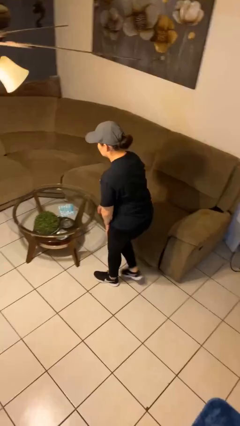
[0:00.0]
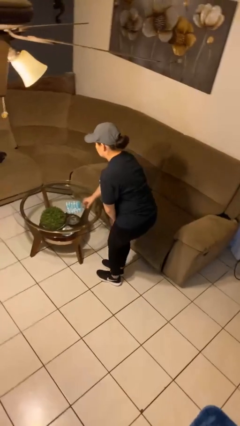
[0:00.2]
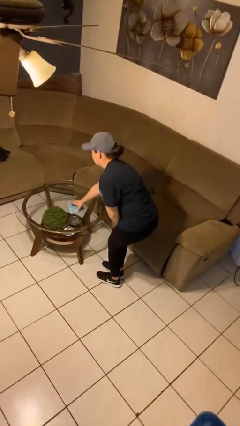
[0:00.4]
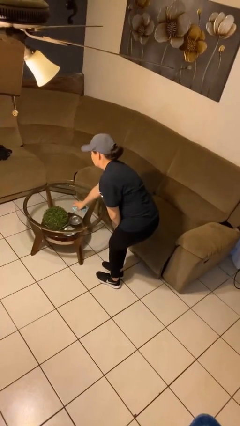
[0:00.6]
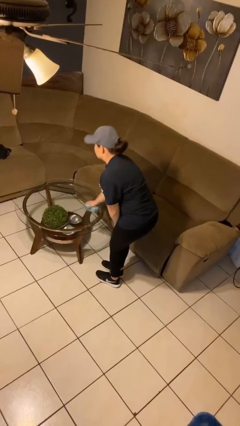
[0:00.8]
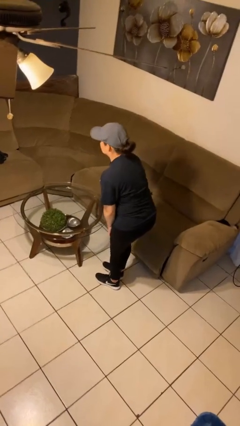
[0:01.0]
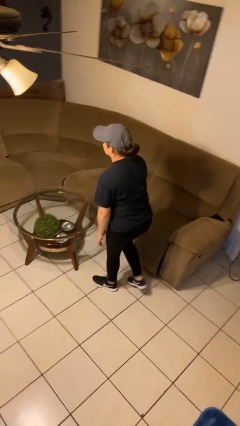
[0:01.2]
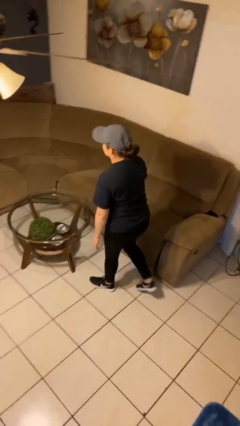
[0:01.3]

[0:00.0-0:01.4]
person picks up object from table

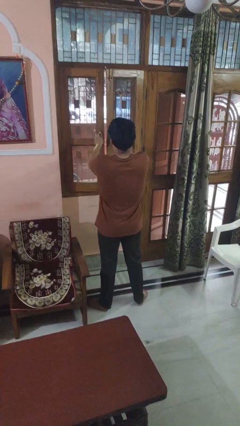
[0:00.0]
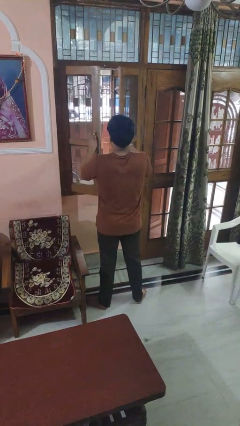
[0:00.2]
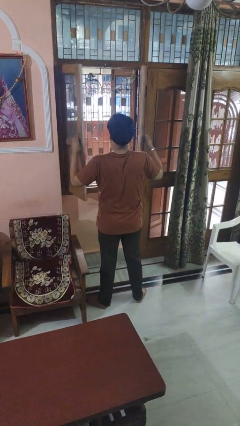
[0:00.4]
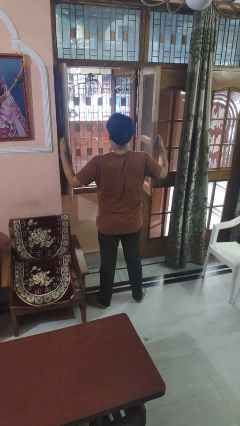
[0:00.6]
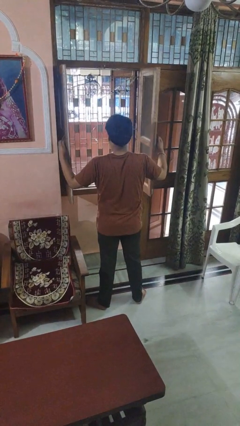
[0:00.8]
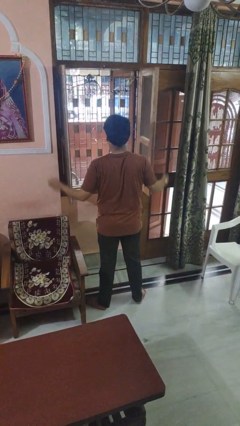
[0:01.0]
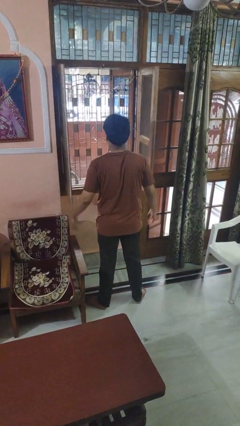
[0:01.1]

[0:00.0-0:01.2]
person opens home window

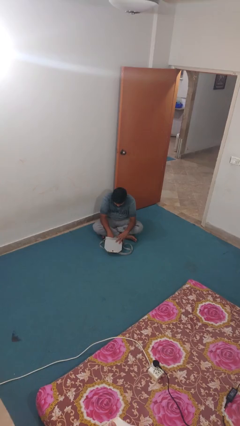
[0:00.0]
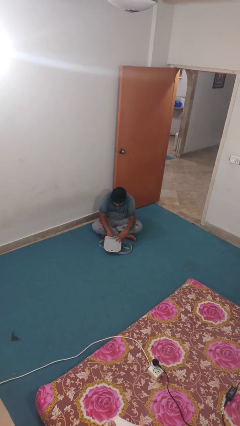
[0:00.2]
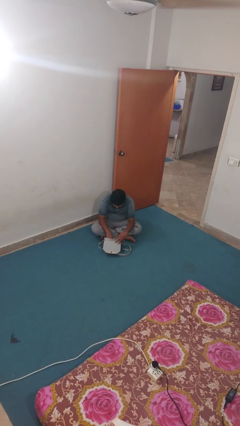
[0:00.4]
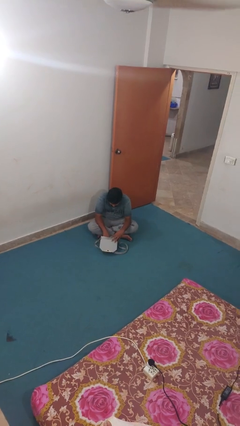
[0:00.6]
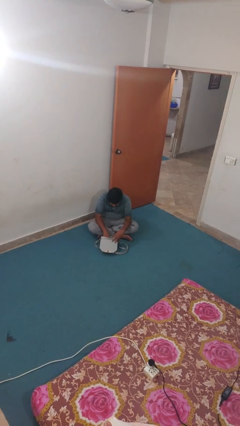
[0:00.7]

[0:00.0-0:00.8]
person searches in purse

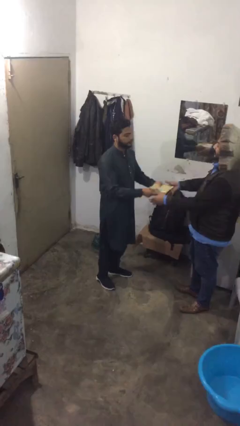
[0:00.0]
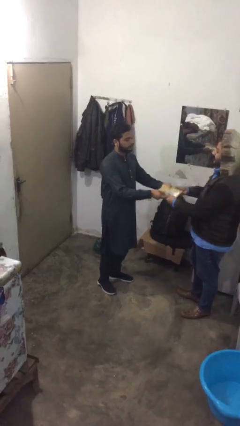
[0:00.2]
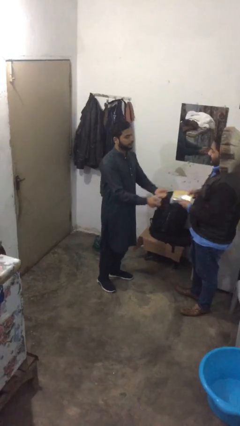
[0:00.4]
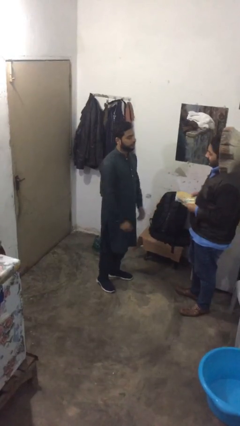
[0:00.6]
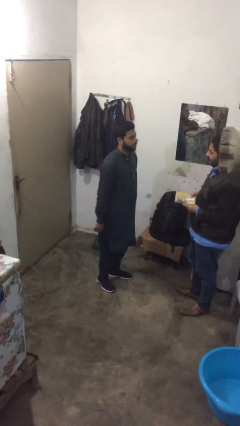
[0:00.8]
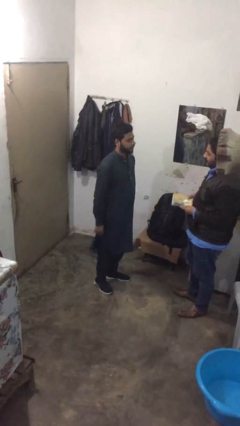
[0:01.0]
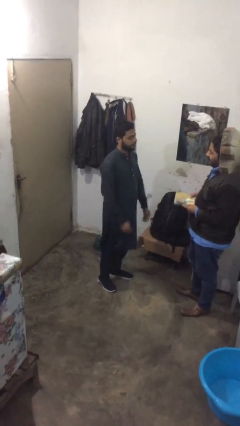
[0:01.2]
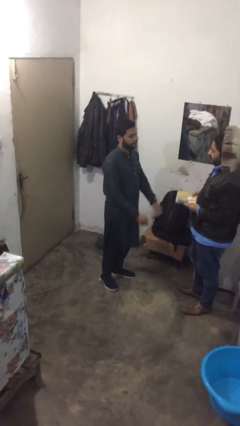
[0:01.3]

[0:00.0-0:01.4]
person transfers object to person

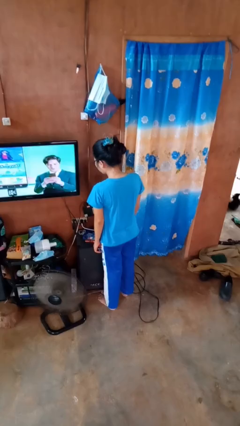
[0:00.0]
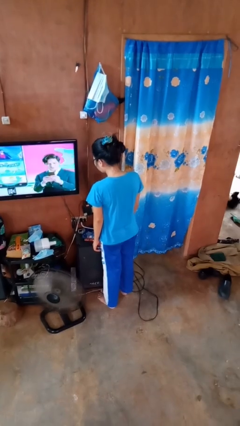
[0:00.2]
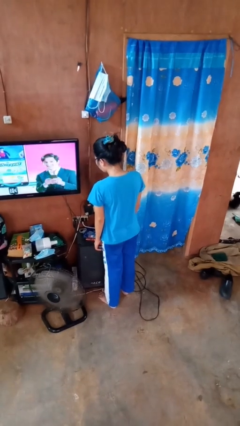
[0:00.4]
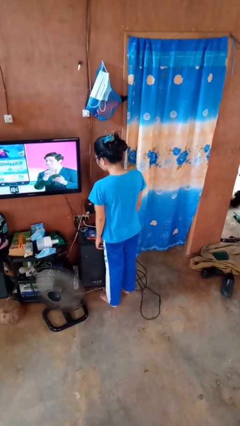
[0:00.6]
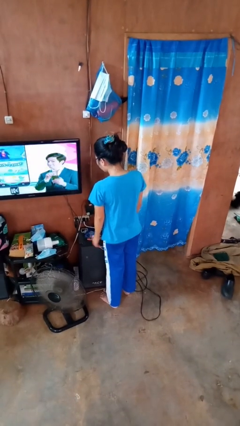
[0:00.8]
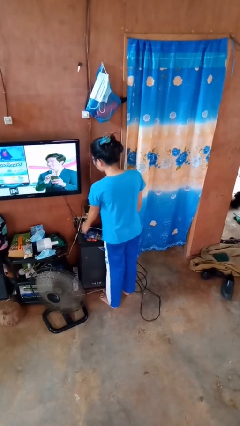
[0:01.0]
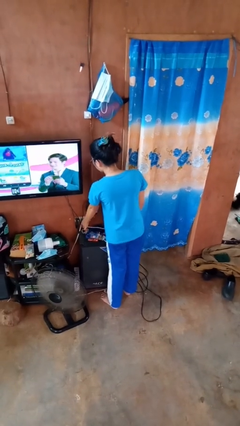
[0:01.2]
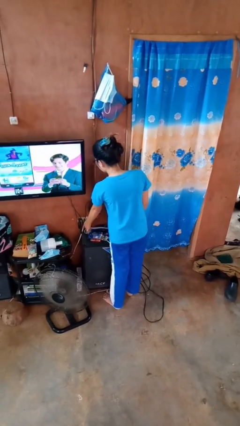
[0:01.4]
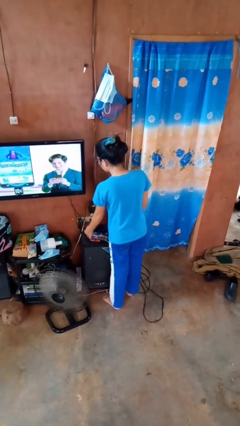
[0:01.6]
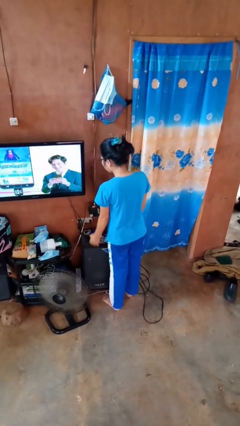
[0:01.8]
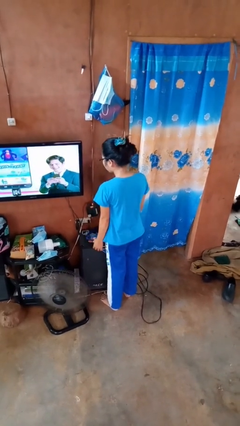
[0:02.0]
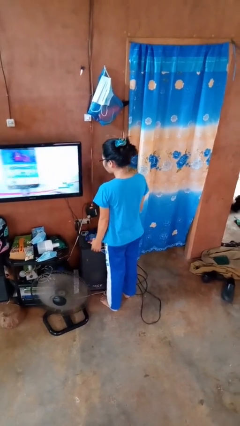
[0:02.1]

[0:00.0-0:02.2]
person unplugs from electrical socket

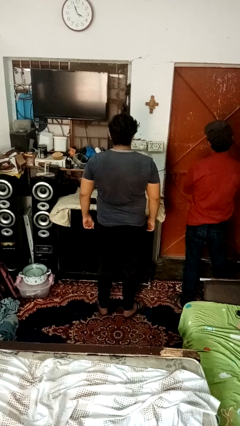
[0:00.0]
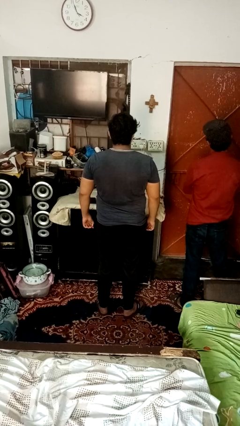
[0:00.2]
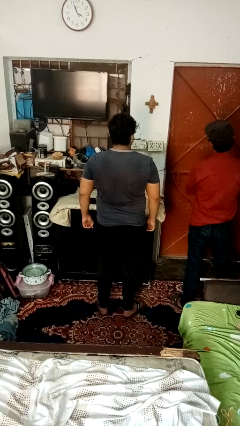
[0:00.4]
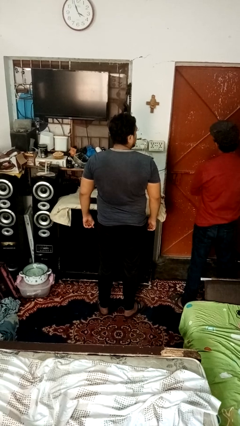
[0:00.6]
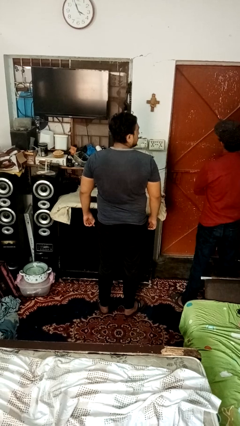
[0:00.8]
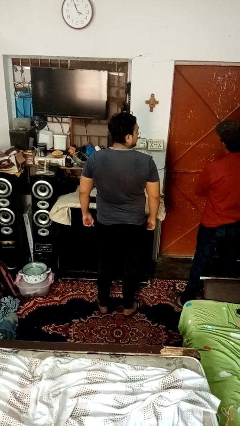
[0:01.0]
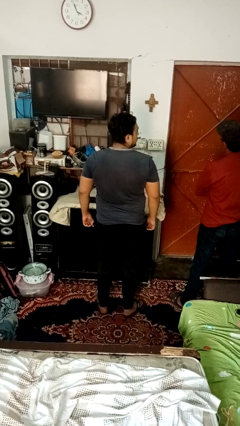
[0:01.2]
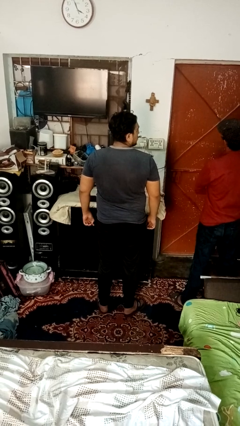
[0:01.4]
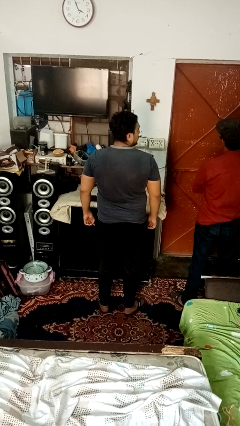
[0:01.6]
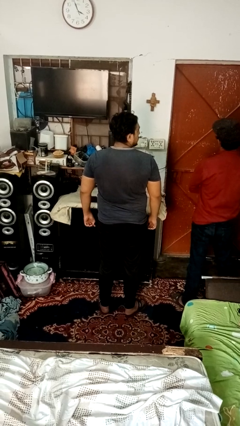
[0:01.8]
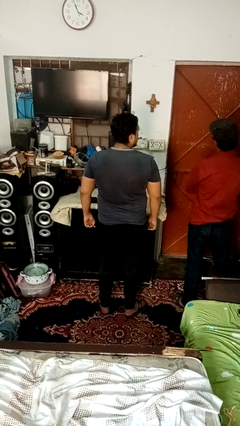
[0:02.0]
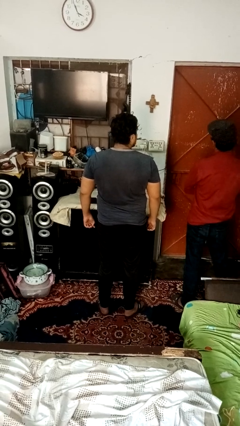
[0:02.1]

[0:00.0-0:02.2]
person looks over shoulder

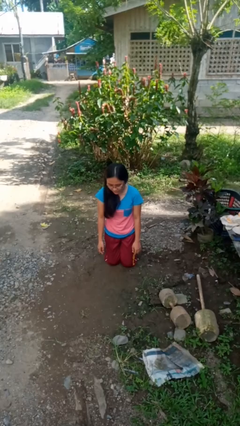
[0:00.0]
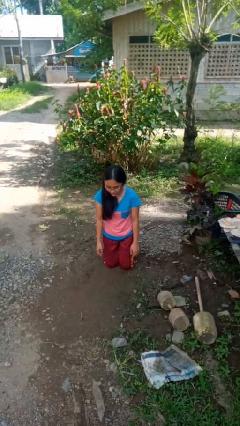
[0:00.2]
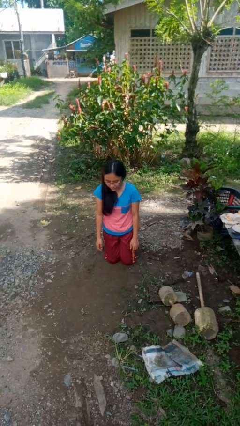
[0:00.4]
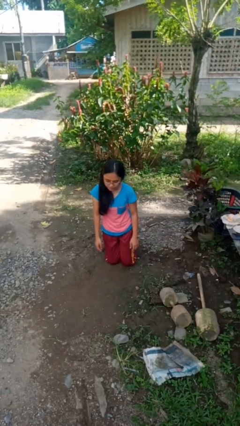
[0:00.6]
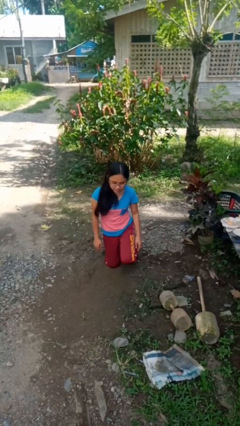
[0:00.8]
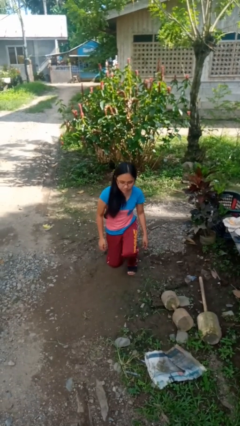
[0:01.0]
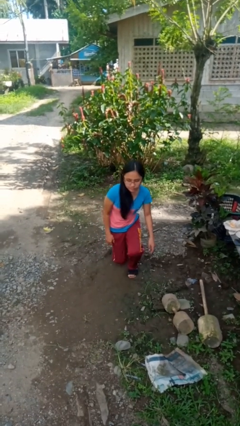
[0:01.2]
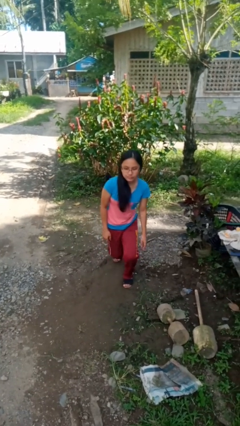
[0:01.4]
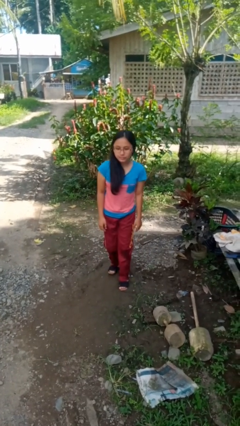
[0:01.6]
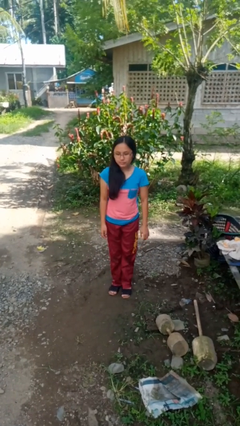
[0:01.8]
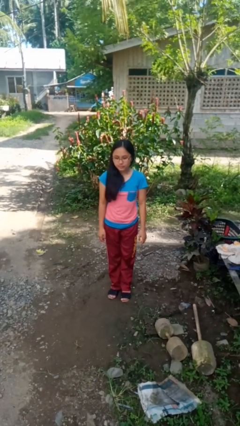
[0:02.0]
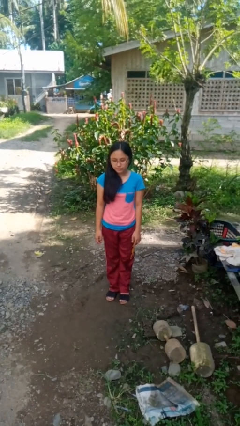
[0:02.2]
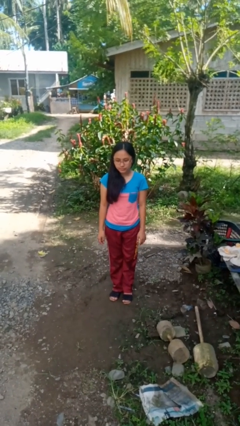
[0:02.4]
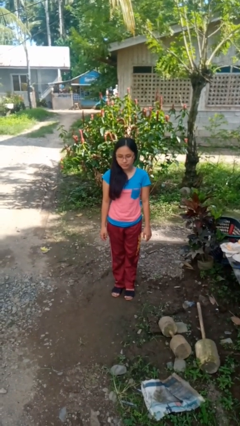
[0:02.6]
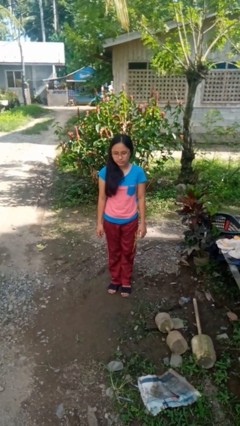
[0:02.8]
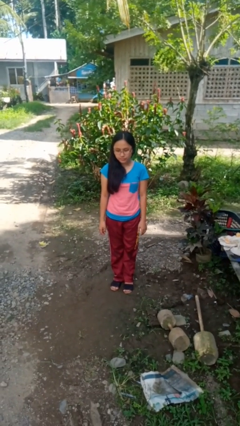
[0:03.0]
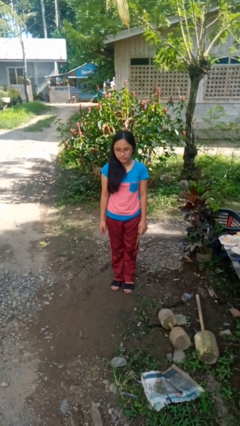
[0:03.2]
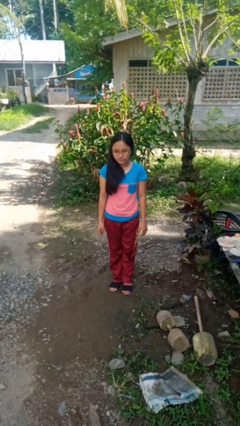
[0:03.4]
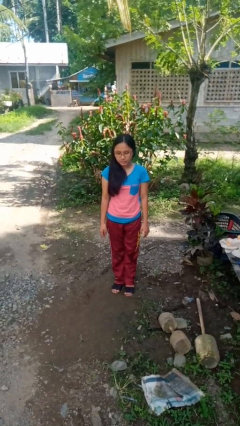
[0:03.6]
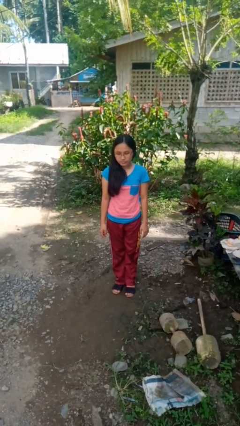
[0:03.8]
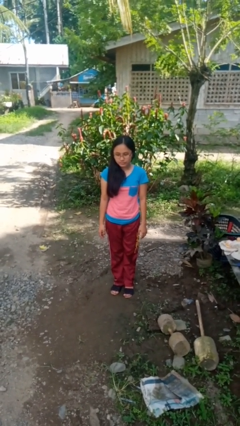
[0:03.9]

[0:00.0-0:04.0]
person stands up from floor

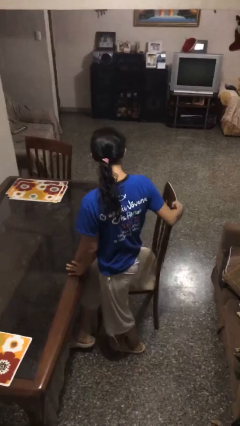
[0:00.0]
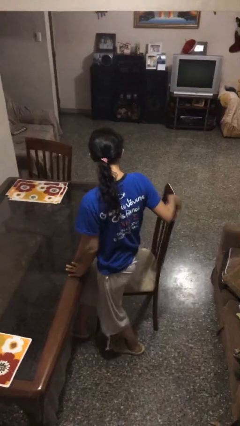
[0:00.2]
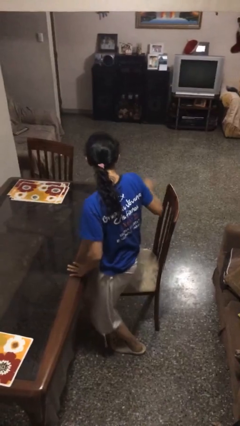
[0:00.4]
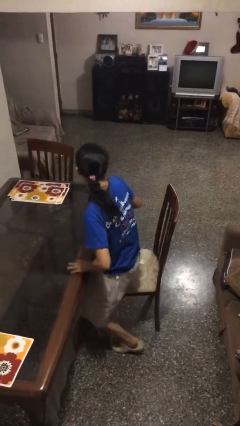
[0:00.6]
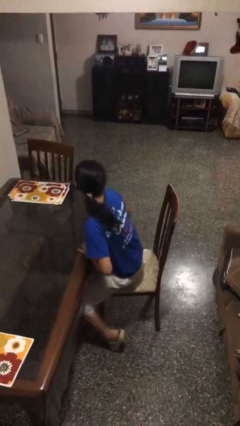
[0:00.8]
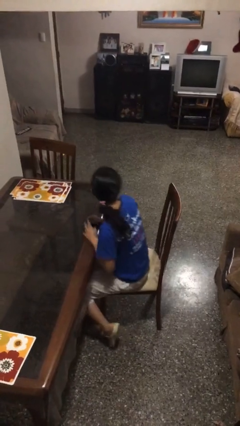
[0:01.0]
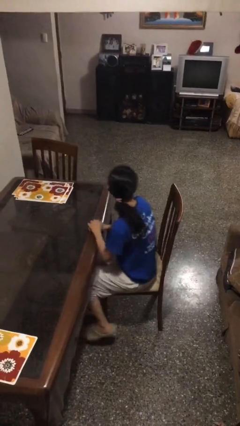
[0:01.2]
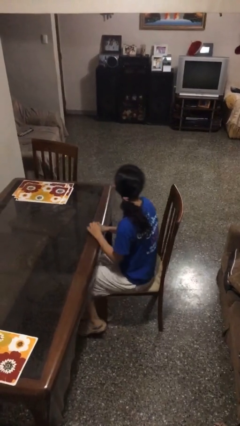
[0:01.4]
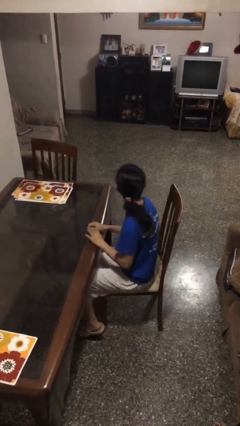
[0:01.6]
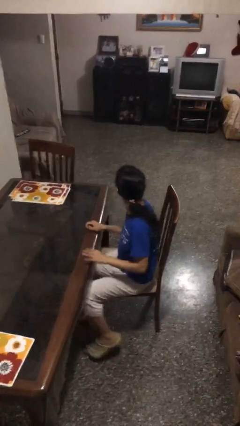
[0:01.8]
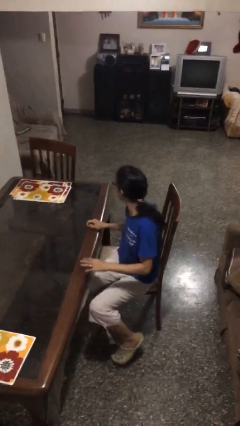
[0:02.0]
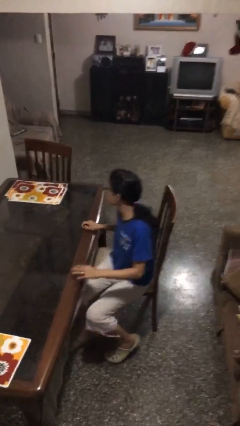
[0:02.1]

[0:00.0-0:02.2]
person sits down

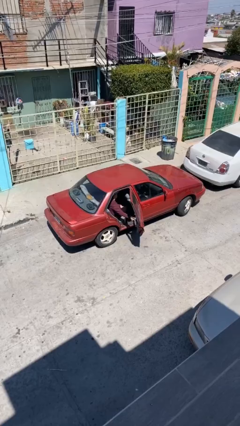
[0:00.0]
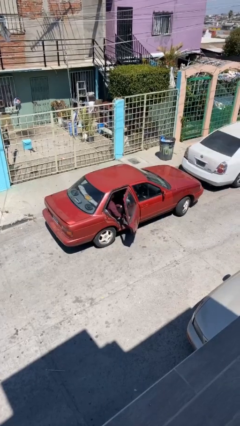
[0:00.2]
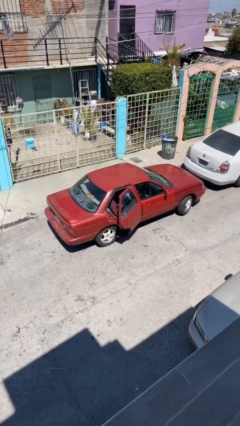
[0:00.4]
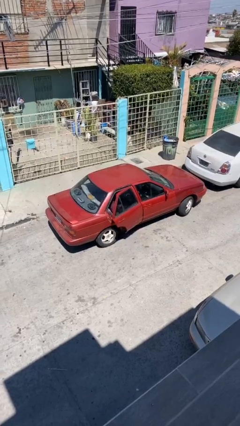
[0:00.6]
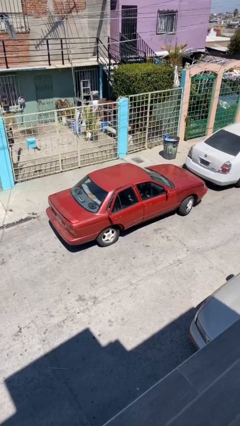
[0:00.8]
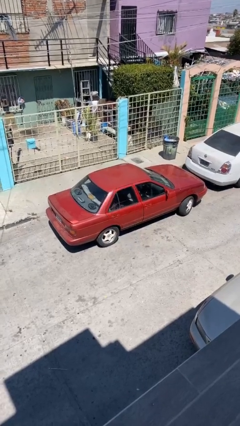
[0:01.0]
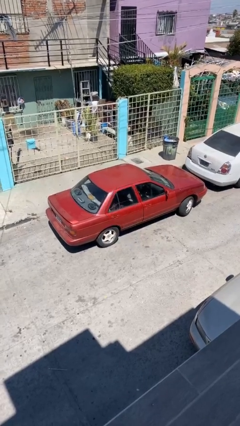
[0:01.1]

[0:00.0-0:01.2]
person closes car door
